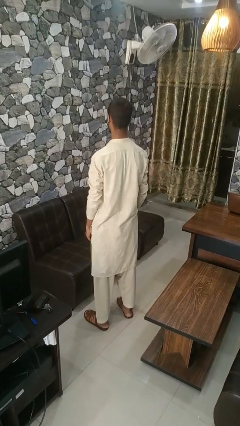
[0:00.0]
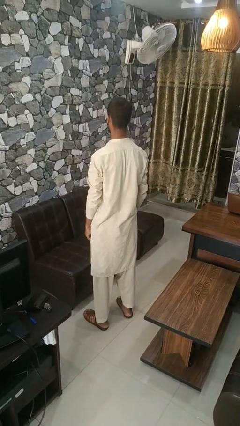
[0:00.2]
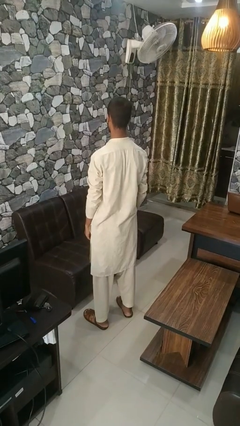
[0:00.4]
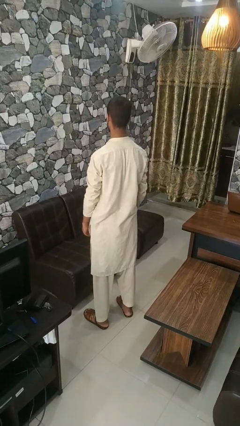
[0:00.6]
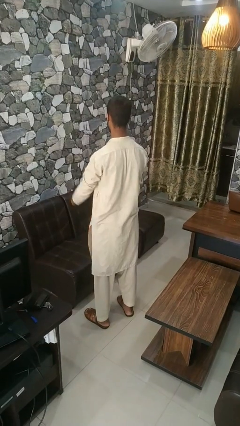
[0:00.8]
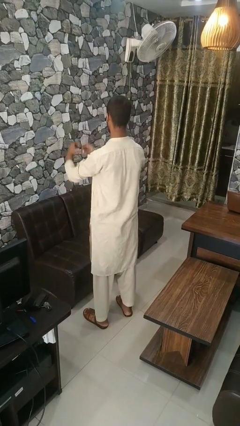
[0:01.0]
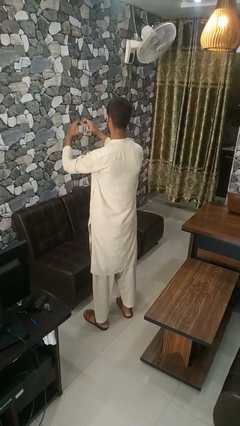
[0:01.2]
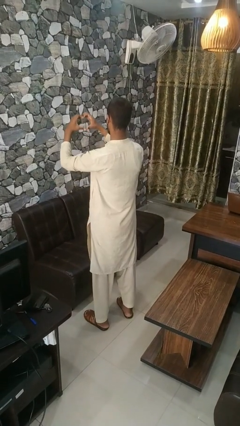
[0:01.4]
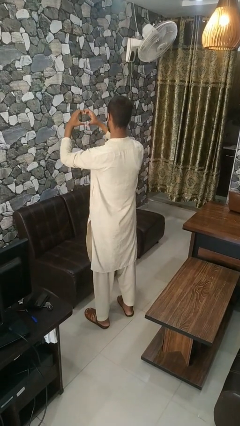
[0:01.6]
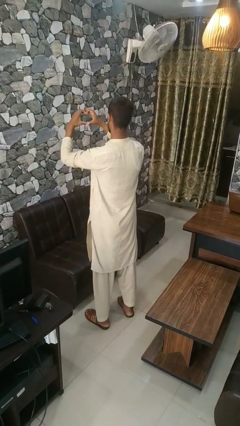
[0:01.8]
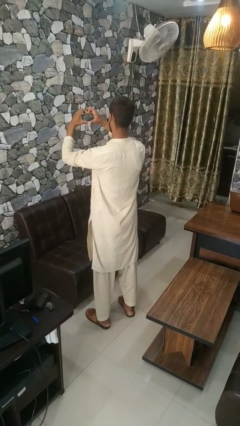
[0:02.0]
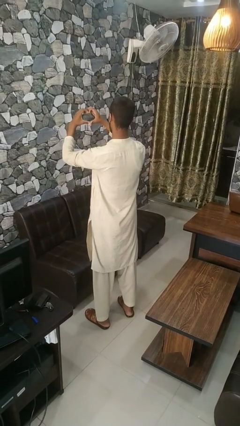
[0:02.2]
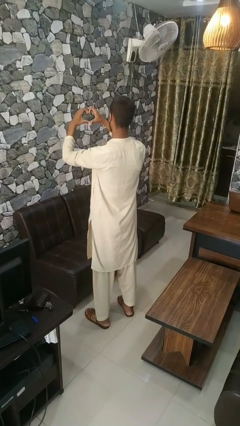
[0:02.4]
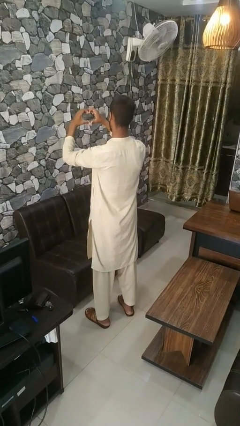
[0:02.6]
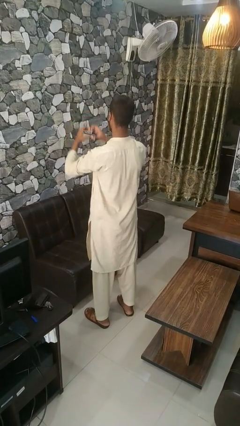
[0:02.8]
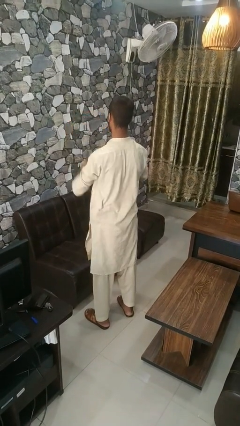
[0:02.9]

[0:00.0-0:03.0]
person gestures heart

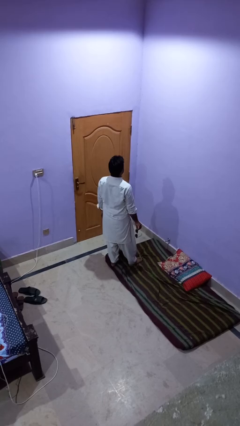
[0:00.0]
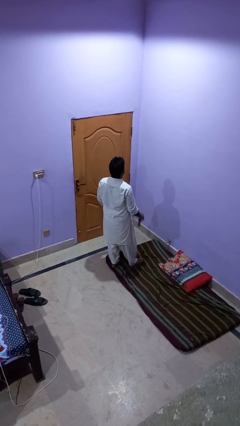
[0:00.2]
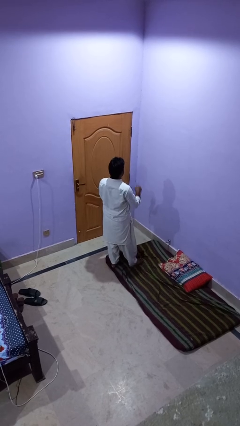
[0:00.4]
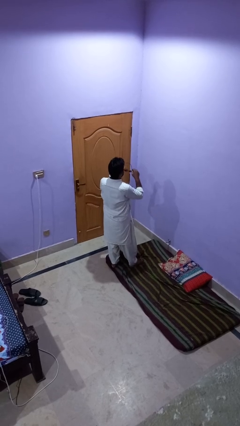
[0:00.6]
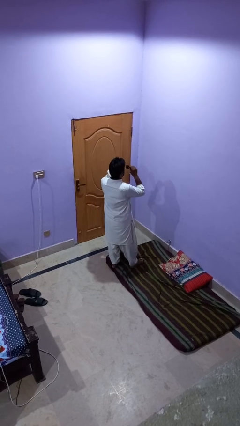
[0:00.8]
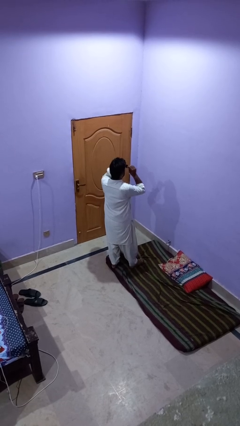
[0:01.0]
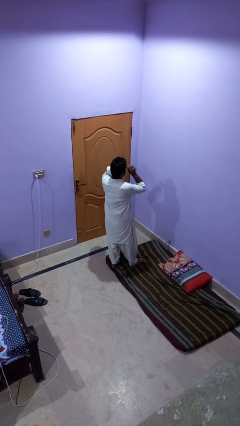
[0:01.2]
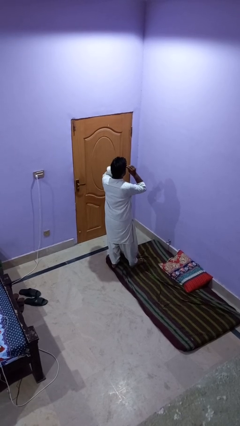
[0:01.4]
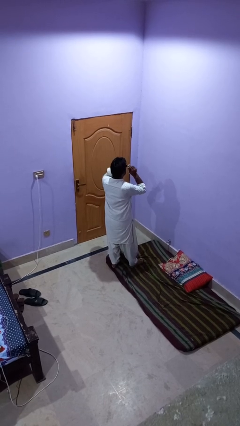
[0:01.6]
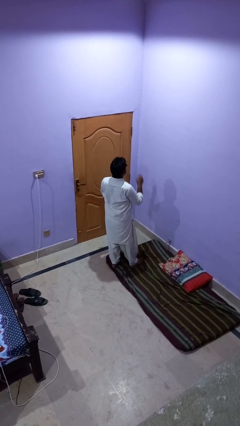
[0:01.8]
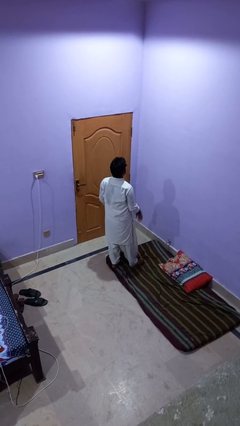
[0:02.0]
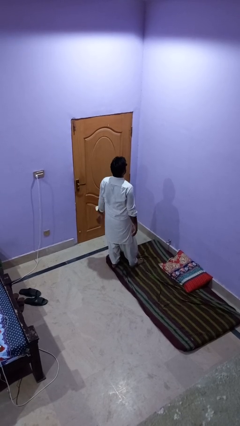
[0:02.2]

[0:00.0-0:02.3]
person puts on sunglasses

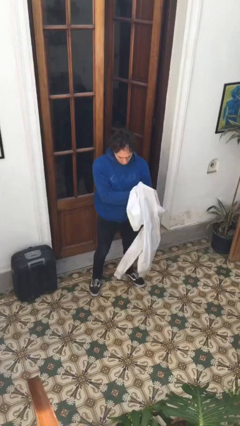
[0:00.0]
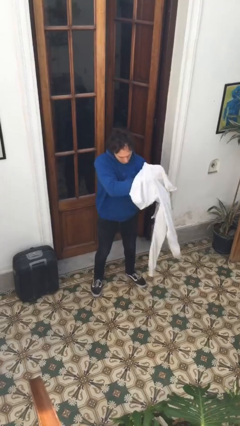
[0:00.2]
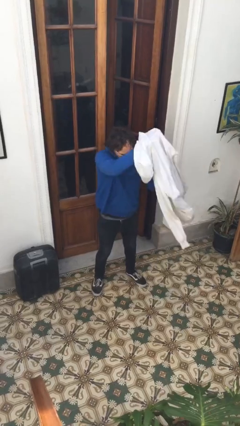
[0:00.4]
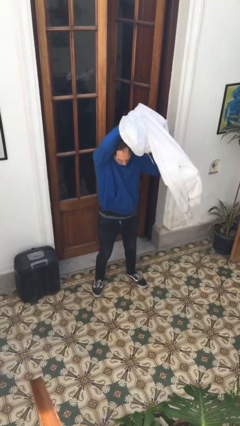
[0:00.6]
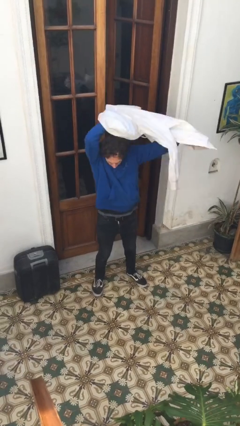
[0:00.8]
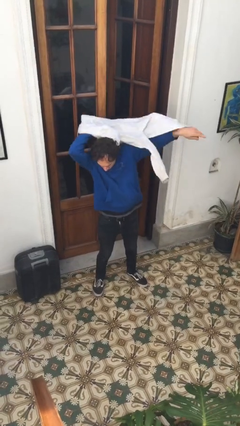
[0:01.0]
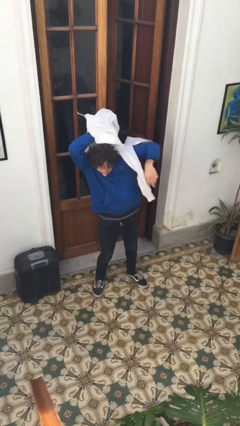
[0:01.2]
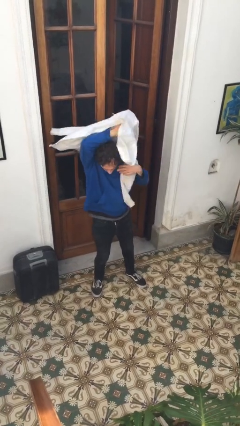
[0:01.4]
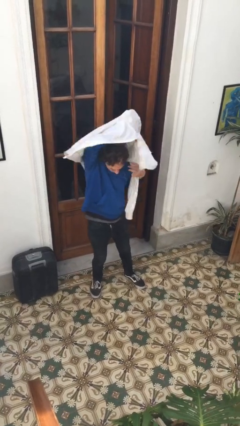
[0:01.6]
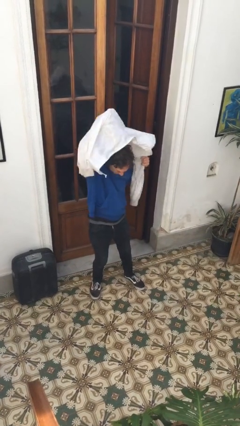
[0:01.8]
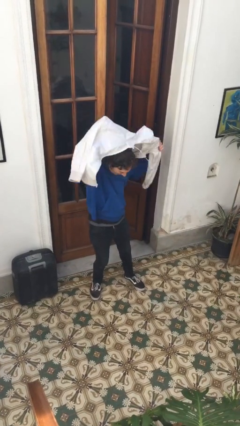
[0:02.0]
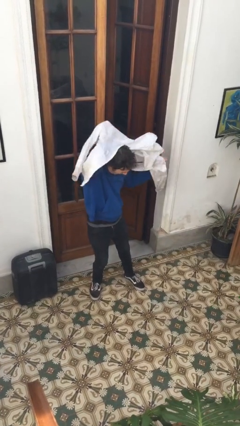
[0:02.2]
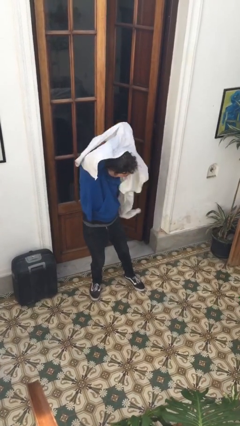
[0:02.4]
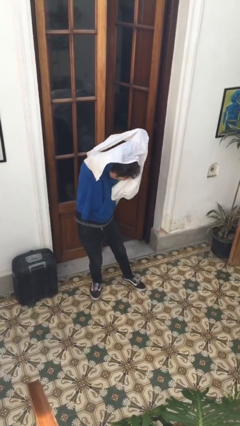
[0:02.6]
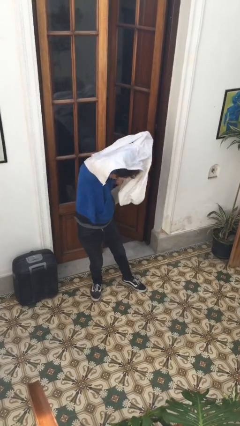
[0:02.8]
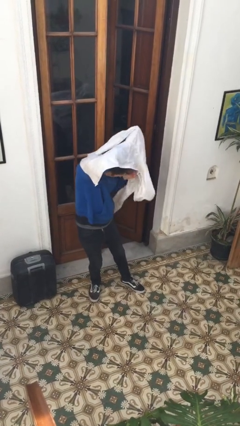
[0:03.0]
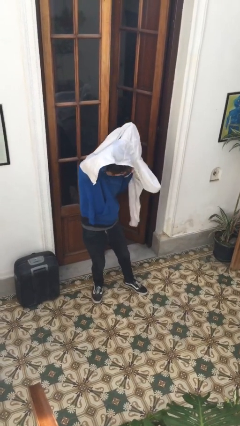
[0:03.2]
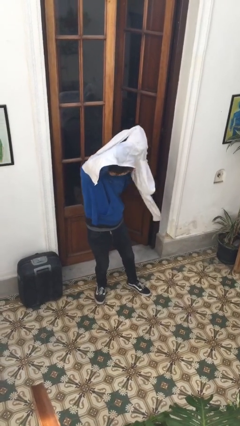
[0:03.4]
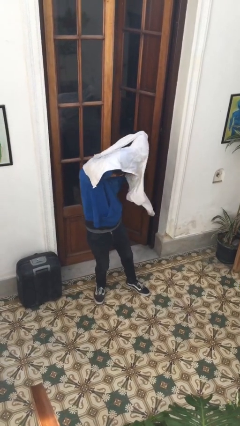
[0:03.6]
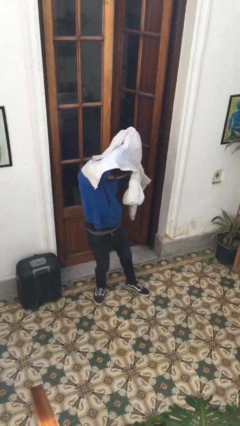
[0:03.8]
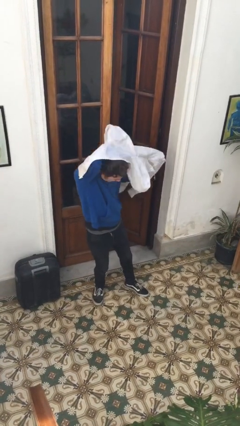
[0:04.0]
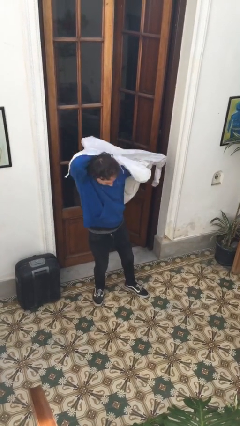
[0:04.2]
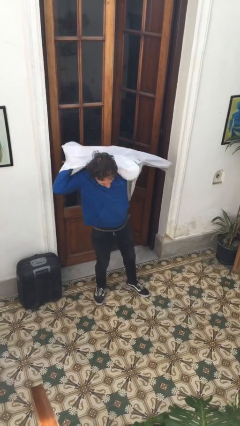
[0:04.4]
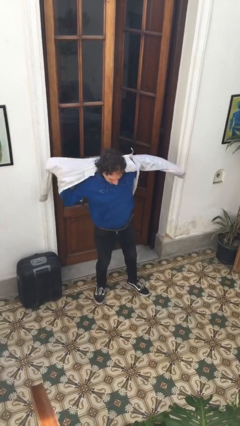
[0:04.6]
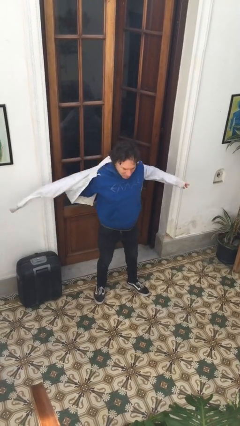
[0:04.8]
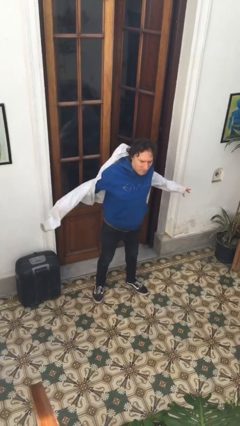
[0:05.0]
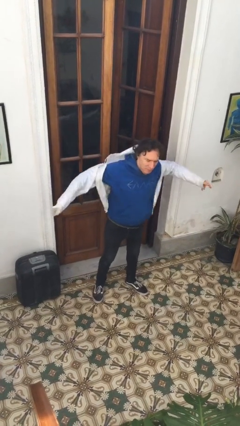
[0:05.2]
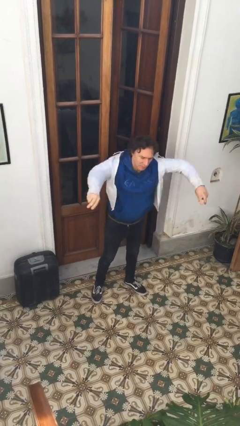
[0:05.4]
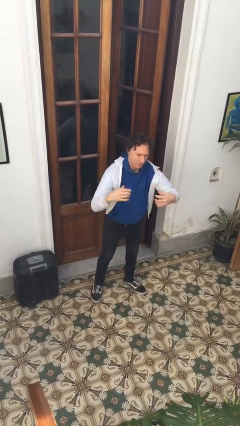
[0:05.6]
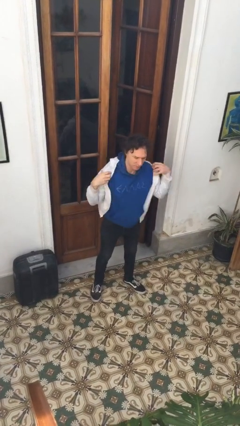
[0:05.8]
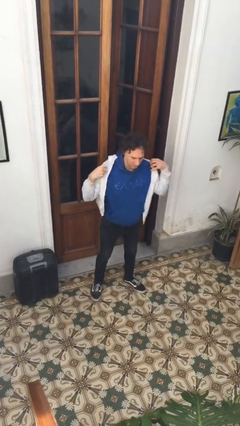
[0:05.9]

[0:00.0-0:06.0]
person puts on jacket

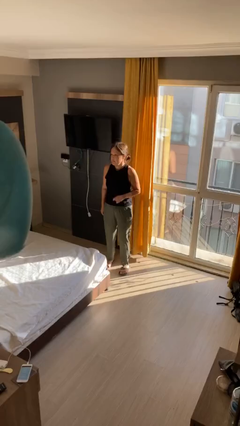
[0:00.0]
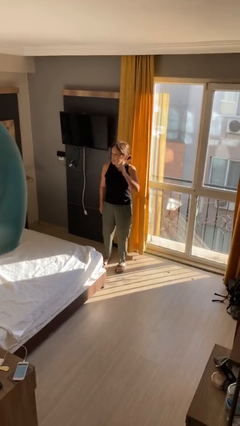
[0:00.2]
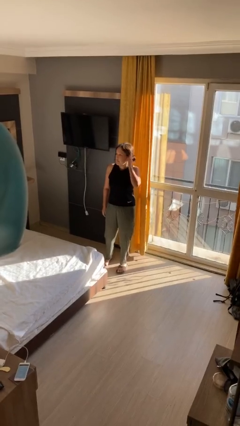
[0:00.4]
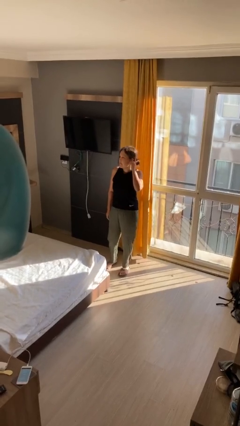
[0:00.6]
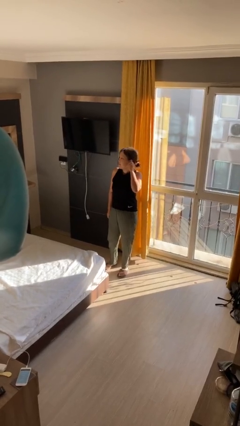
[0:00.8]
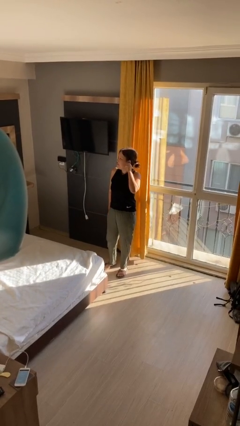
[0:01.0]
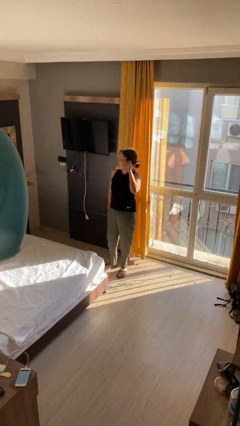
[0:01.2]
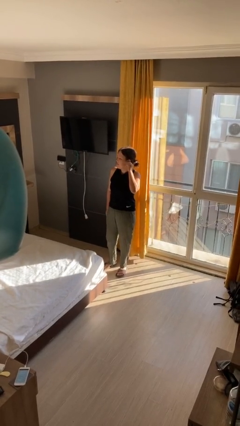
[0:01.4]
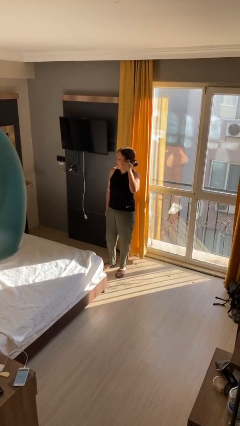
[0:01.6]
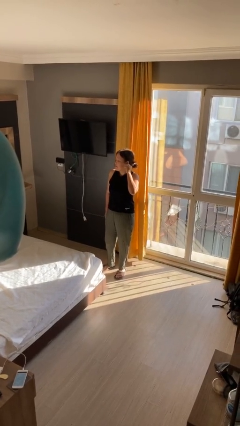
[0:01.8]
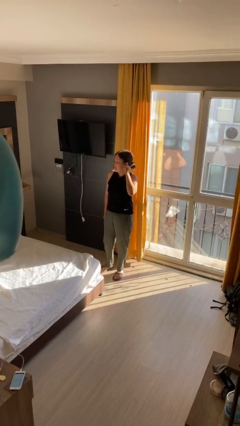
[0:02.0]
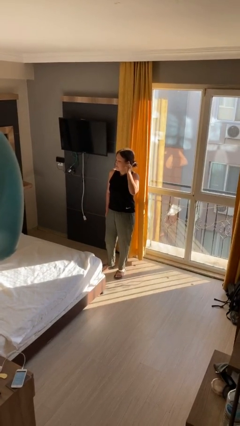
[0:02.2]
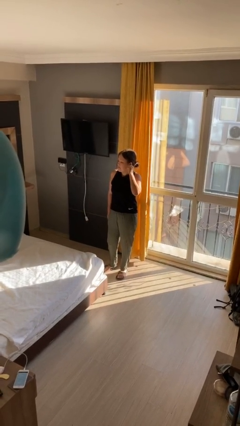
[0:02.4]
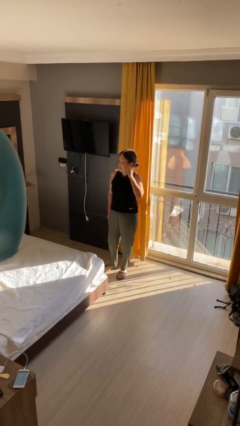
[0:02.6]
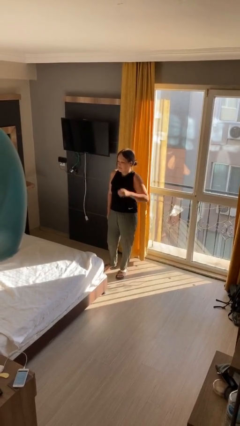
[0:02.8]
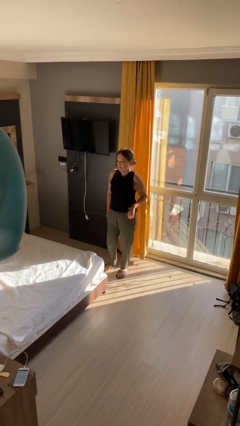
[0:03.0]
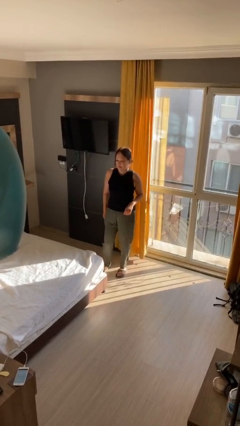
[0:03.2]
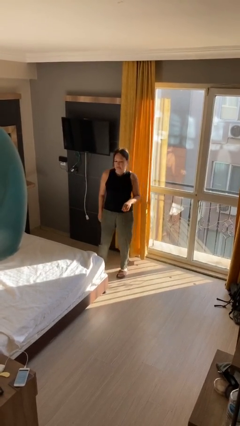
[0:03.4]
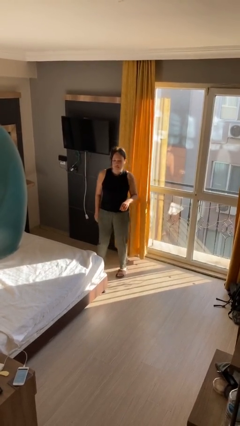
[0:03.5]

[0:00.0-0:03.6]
person touches earlobe

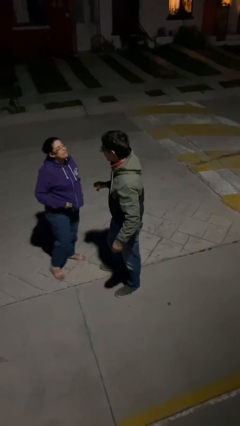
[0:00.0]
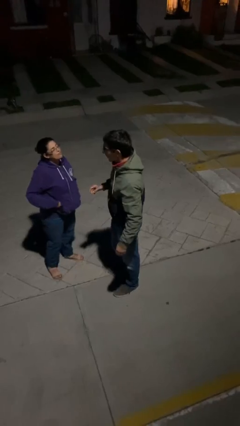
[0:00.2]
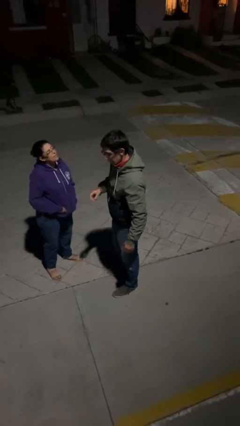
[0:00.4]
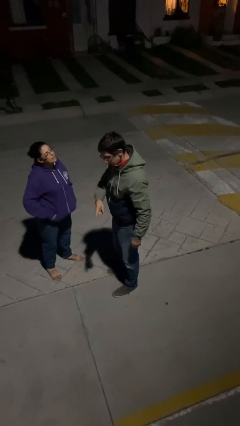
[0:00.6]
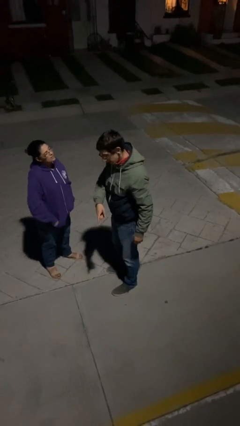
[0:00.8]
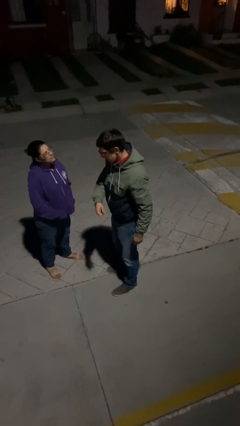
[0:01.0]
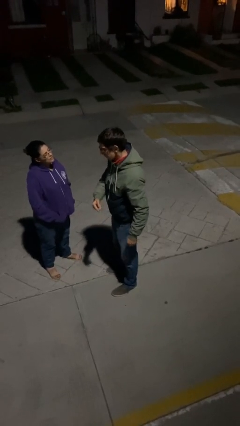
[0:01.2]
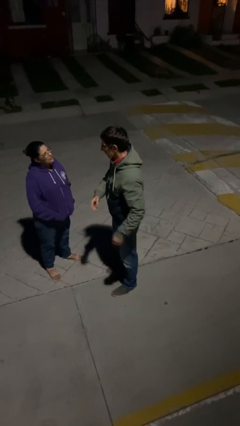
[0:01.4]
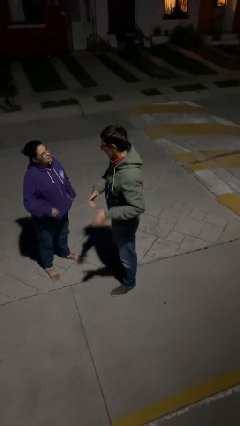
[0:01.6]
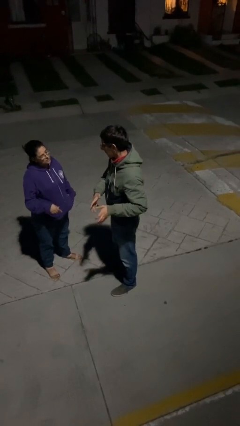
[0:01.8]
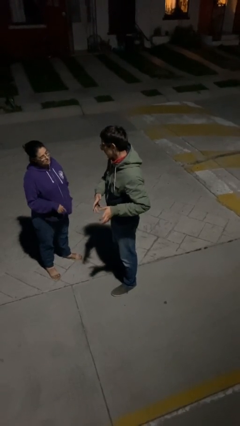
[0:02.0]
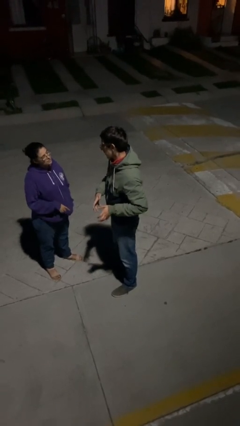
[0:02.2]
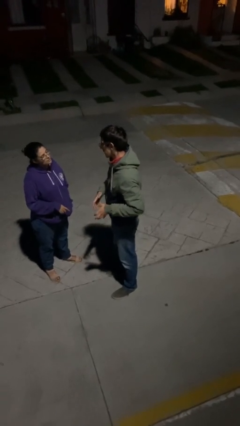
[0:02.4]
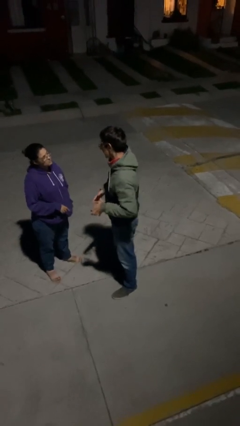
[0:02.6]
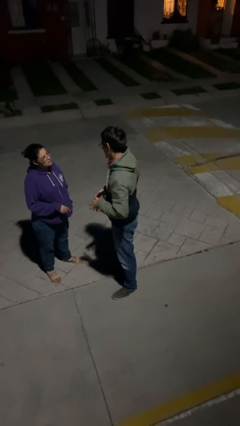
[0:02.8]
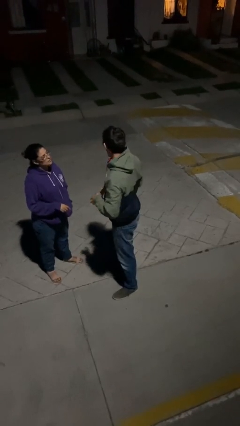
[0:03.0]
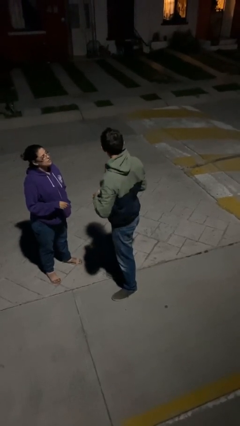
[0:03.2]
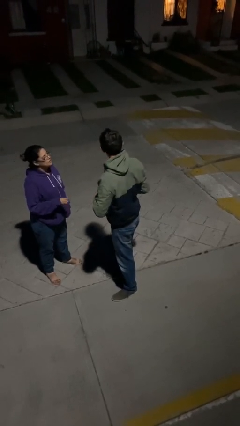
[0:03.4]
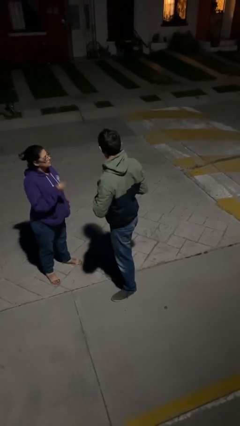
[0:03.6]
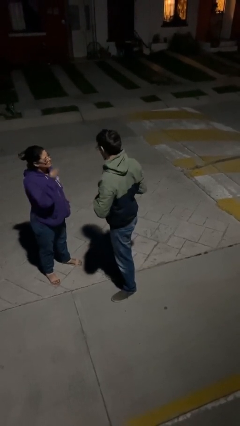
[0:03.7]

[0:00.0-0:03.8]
person talks to person
